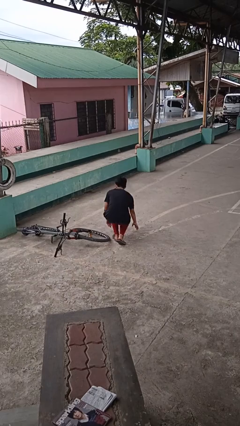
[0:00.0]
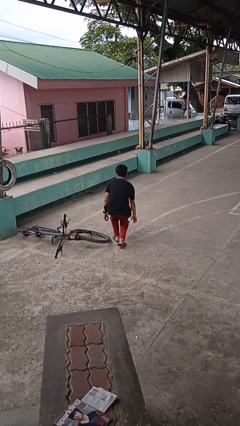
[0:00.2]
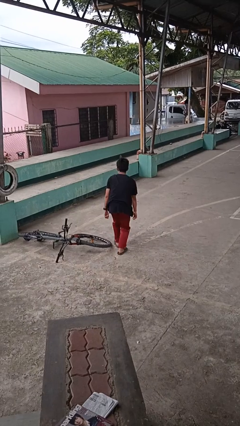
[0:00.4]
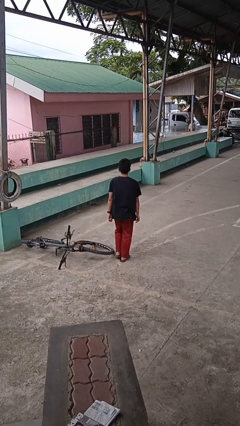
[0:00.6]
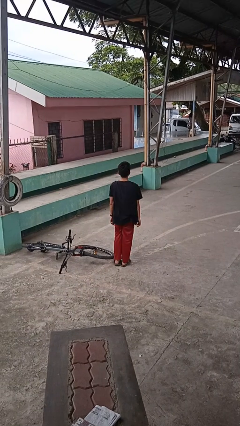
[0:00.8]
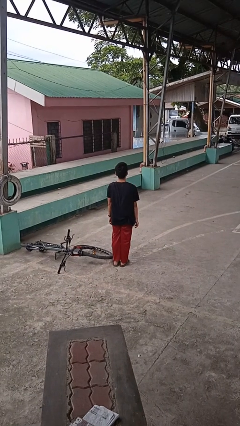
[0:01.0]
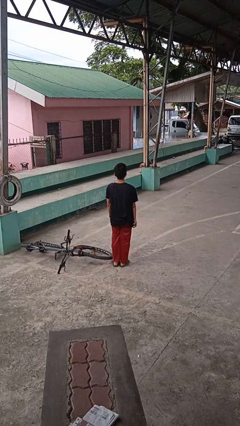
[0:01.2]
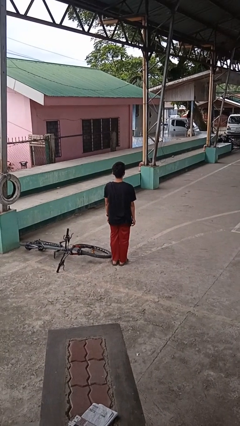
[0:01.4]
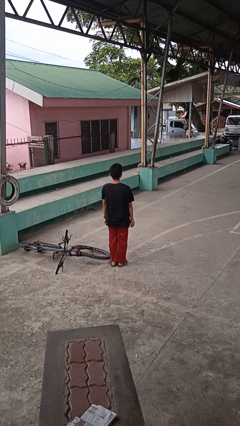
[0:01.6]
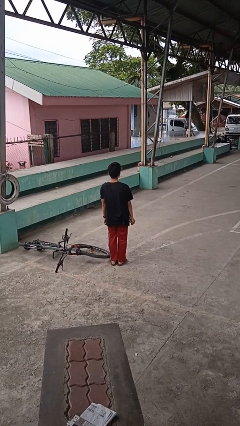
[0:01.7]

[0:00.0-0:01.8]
person stands up from floor

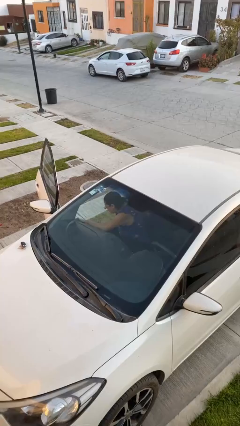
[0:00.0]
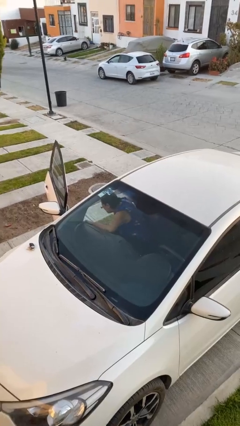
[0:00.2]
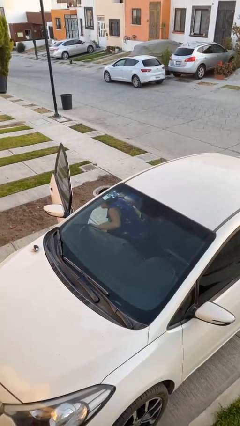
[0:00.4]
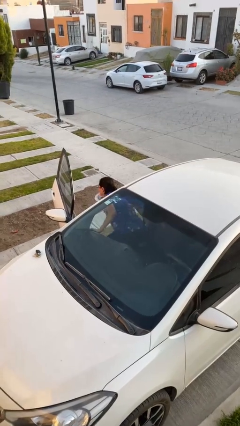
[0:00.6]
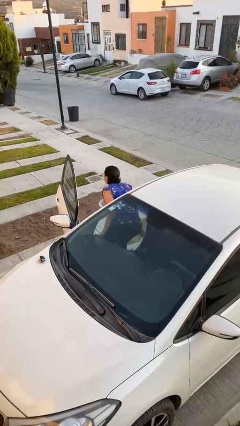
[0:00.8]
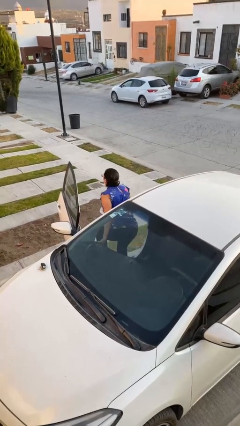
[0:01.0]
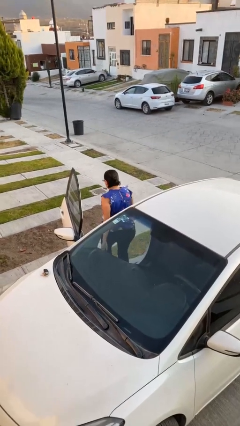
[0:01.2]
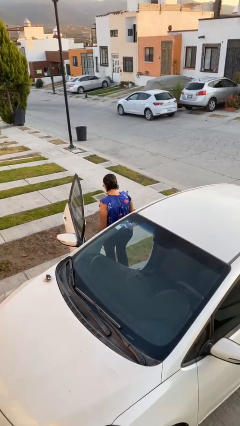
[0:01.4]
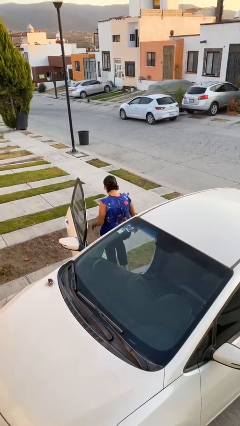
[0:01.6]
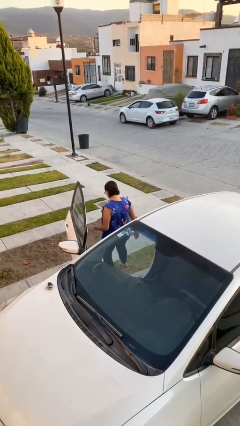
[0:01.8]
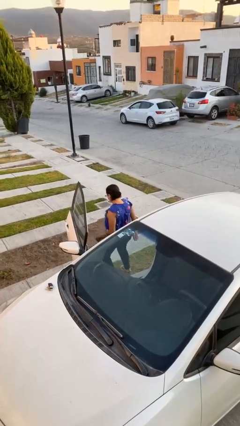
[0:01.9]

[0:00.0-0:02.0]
person exits car

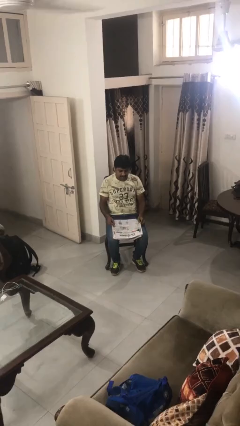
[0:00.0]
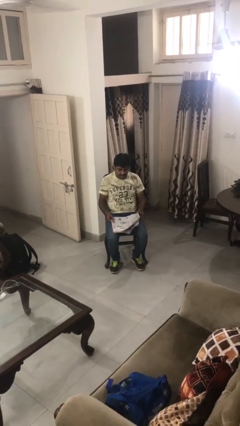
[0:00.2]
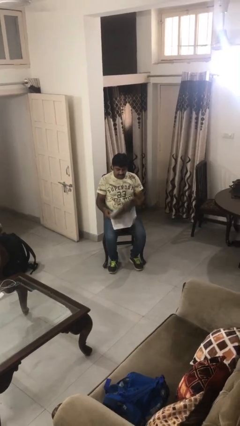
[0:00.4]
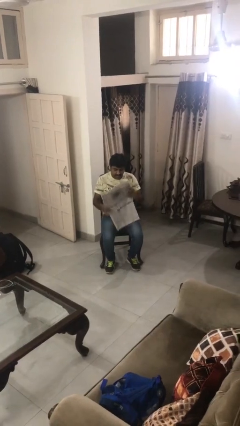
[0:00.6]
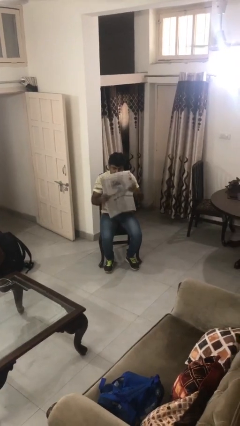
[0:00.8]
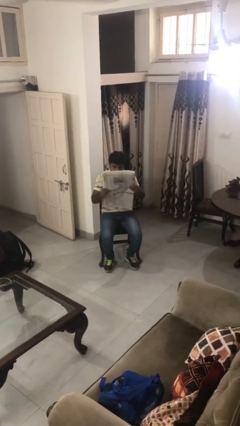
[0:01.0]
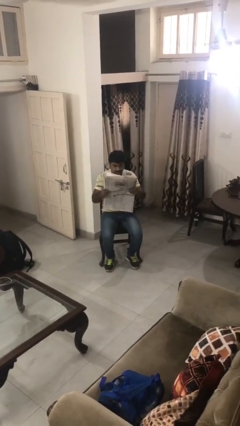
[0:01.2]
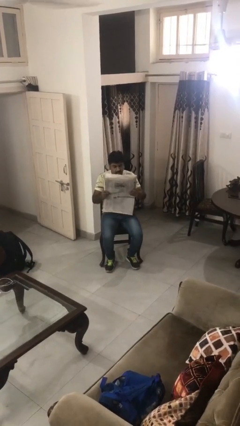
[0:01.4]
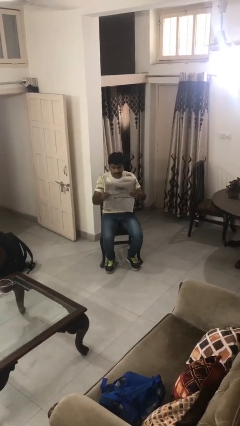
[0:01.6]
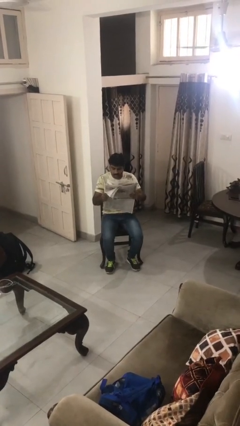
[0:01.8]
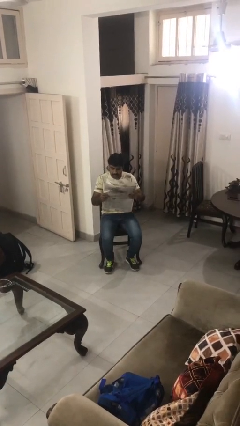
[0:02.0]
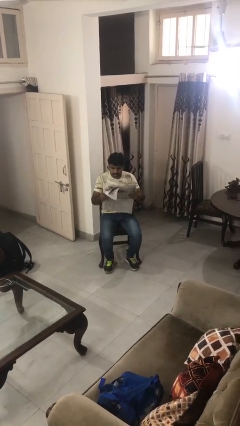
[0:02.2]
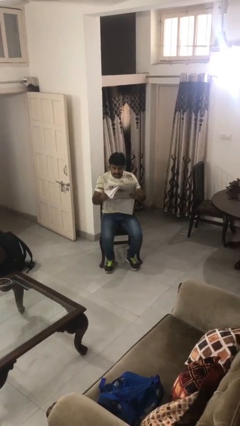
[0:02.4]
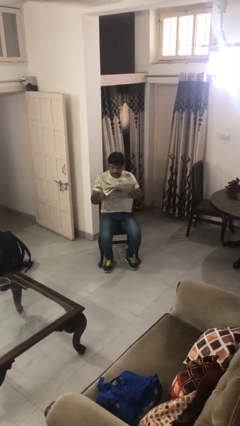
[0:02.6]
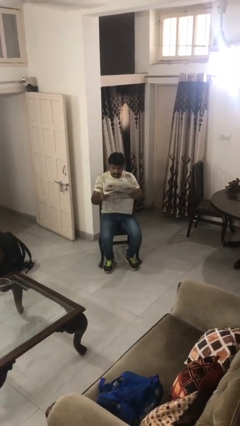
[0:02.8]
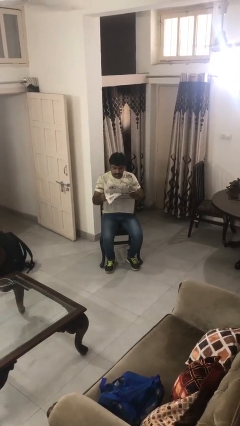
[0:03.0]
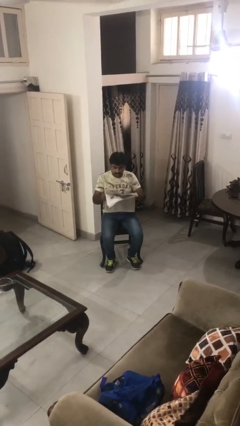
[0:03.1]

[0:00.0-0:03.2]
person reads newspaper

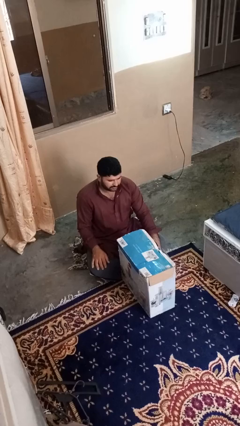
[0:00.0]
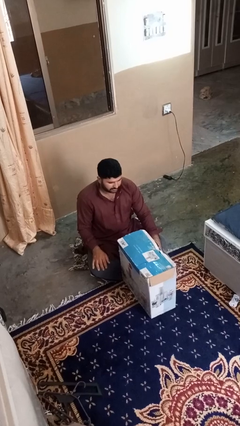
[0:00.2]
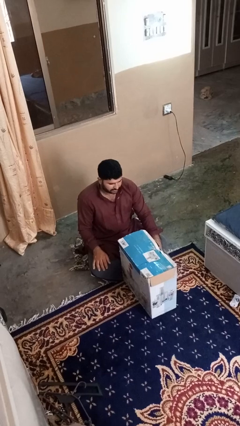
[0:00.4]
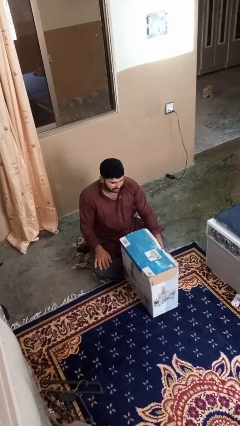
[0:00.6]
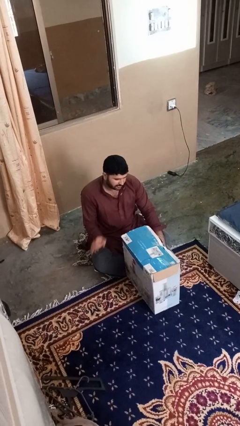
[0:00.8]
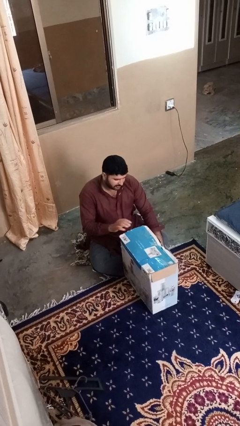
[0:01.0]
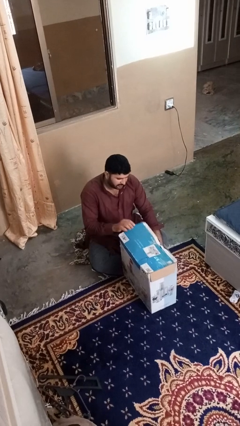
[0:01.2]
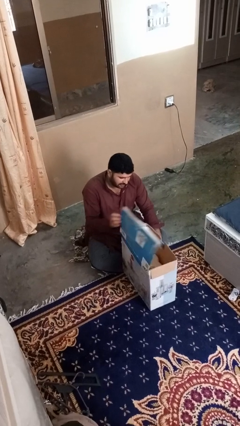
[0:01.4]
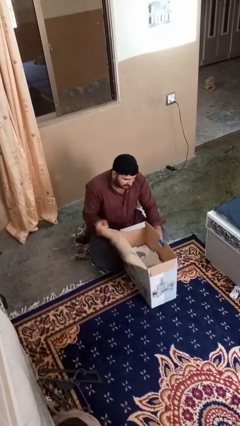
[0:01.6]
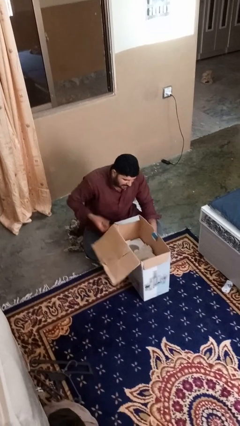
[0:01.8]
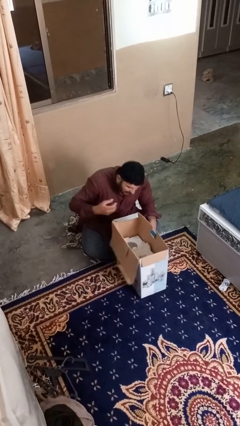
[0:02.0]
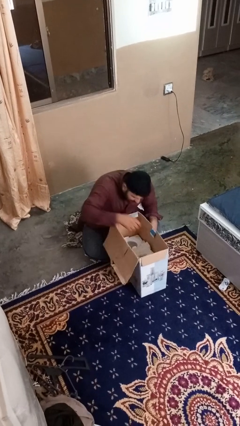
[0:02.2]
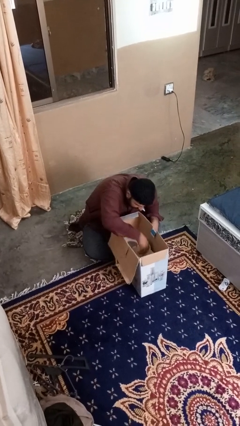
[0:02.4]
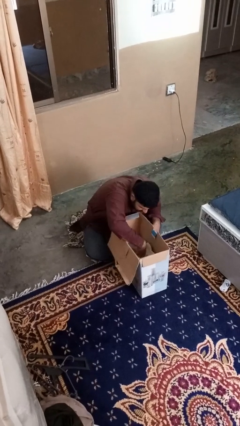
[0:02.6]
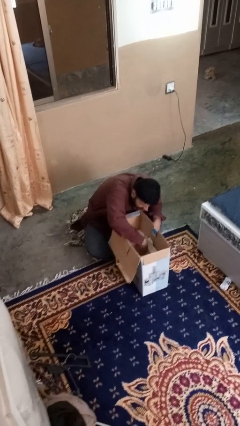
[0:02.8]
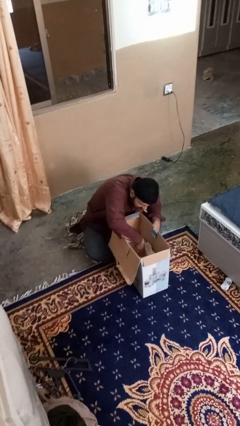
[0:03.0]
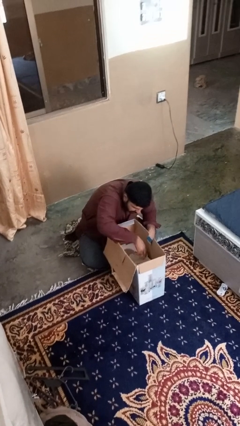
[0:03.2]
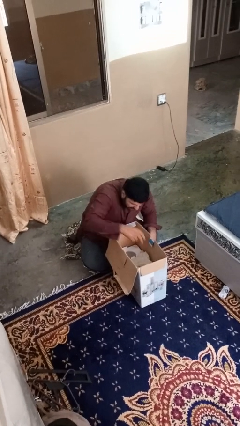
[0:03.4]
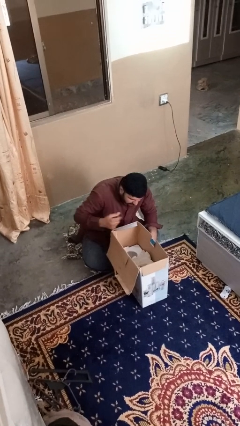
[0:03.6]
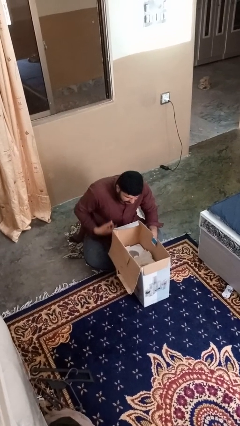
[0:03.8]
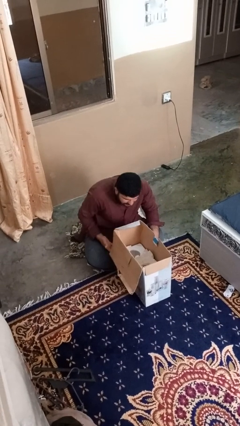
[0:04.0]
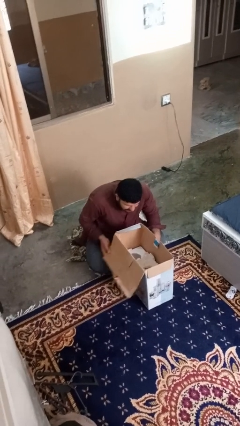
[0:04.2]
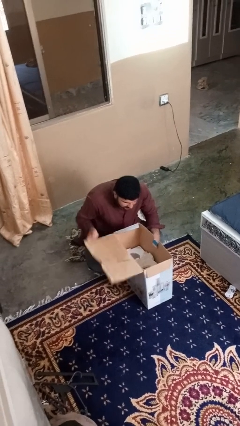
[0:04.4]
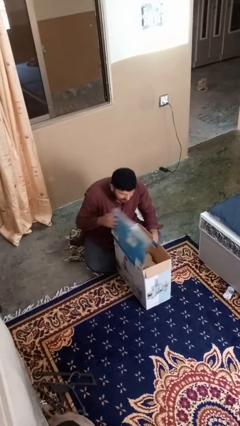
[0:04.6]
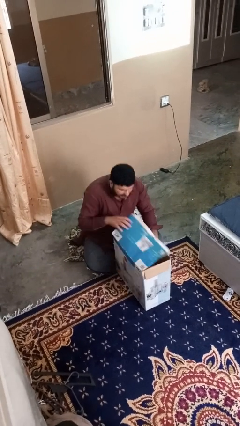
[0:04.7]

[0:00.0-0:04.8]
person searches in box

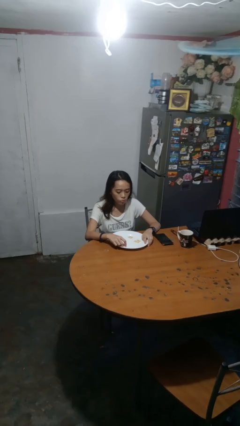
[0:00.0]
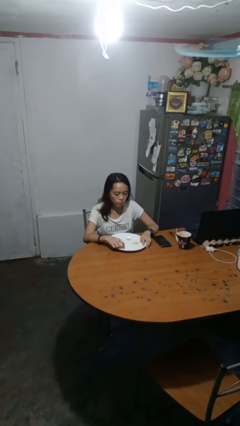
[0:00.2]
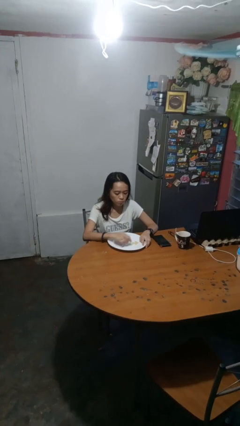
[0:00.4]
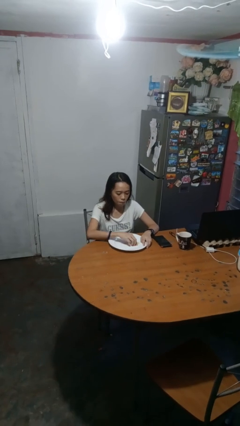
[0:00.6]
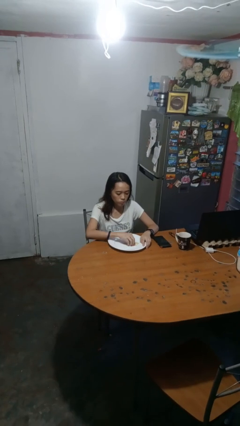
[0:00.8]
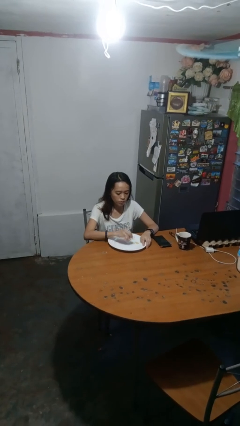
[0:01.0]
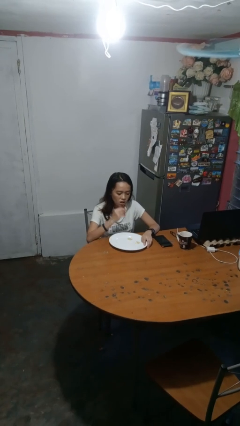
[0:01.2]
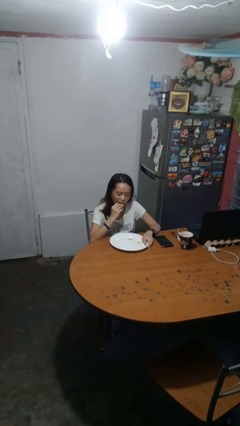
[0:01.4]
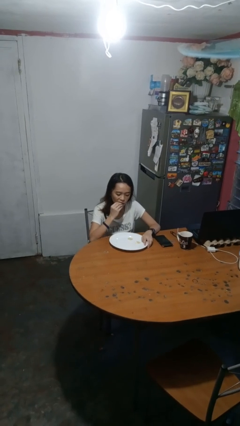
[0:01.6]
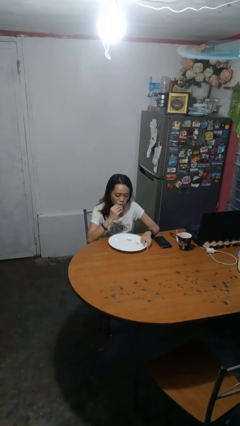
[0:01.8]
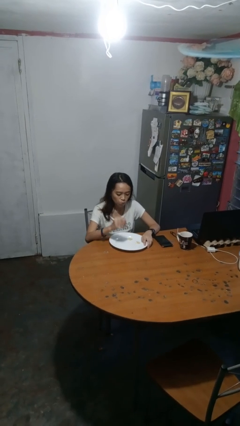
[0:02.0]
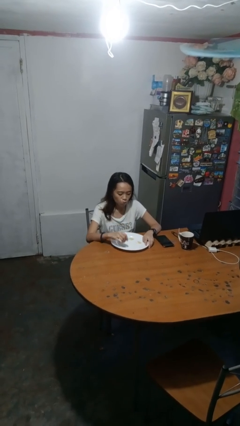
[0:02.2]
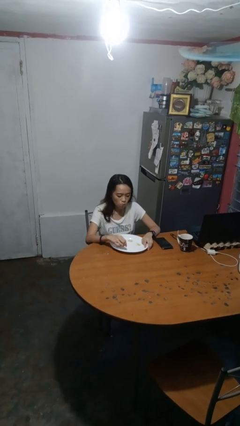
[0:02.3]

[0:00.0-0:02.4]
person eats with hands

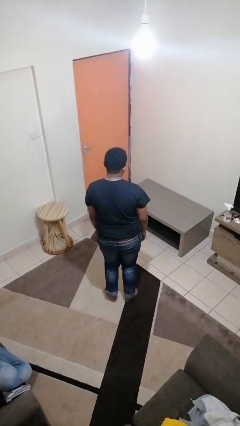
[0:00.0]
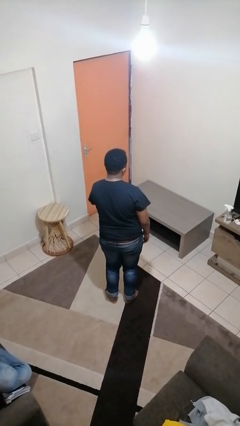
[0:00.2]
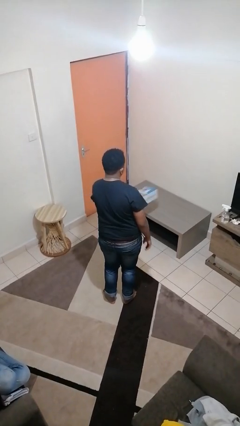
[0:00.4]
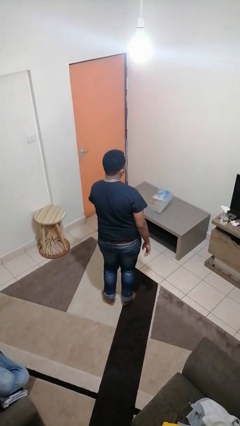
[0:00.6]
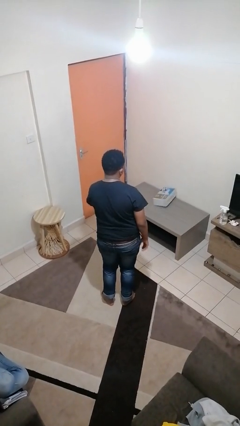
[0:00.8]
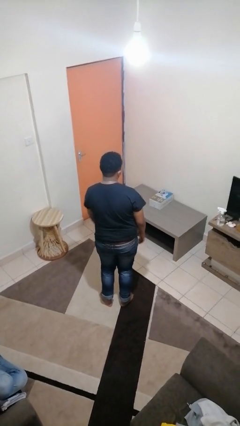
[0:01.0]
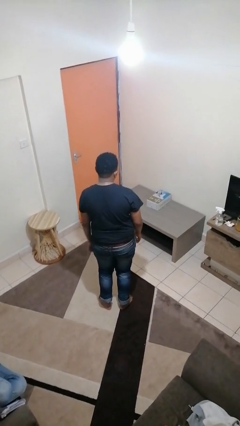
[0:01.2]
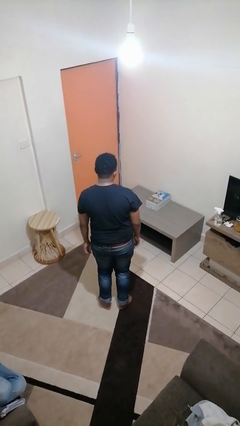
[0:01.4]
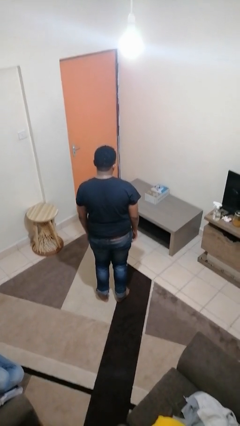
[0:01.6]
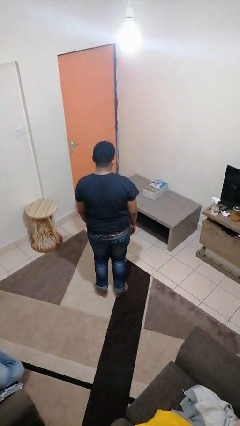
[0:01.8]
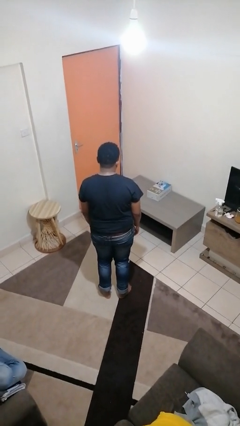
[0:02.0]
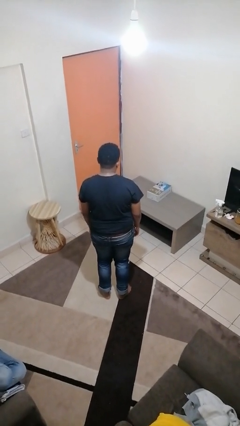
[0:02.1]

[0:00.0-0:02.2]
person throws object on table

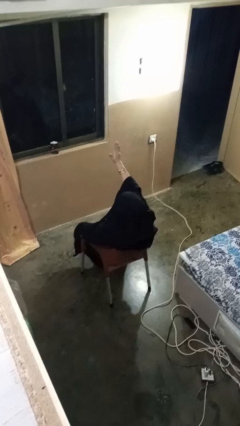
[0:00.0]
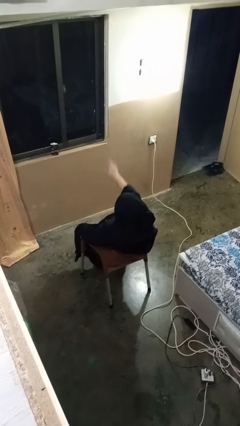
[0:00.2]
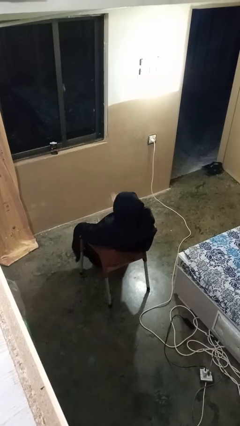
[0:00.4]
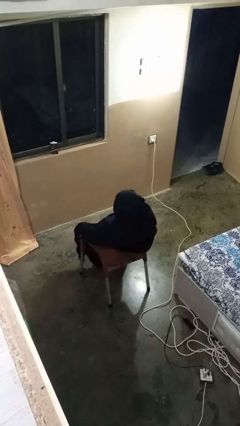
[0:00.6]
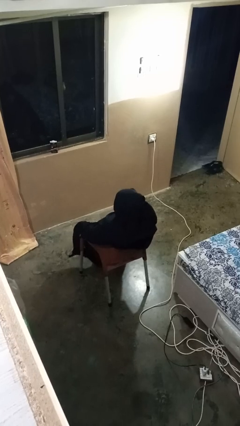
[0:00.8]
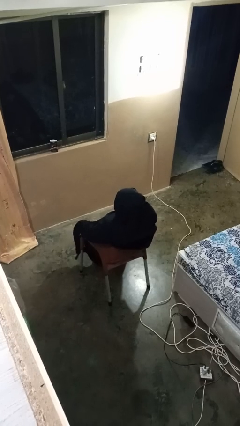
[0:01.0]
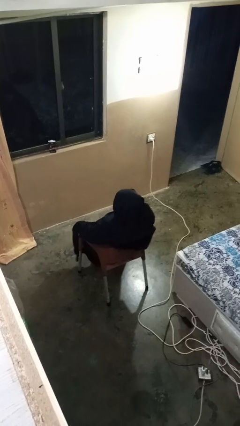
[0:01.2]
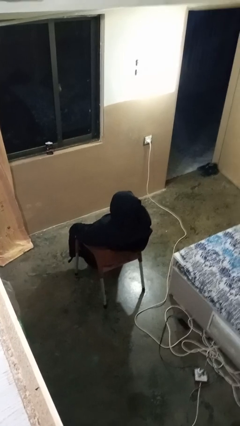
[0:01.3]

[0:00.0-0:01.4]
person gestures swipe down
